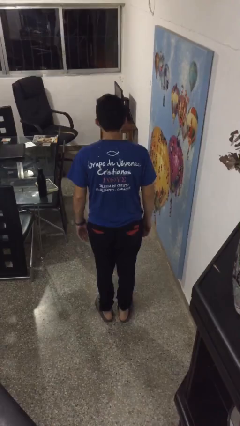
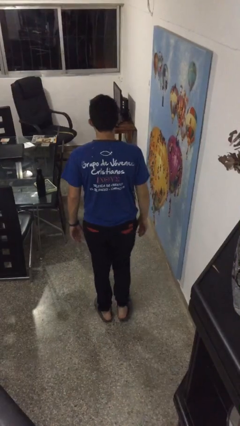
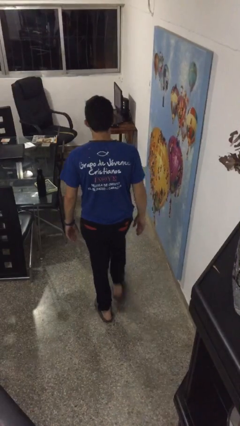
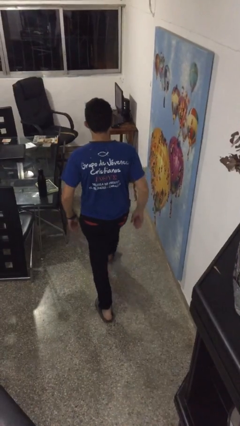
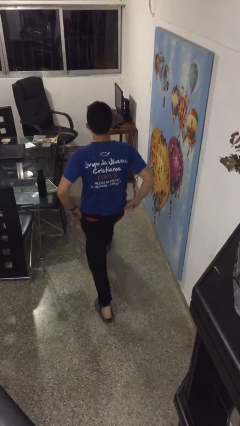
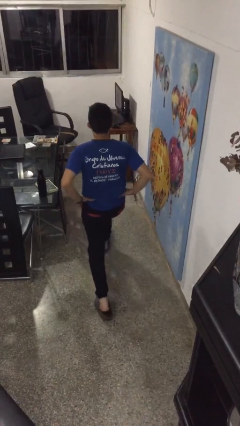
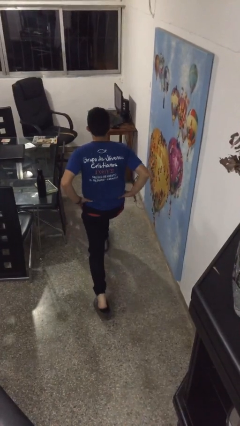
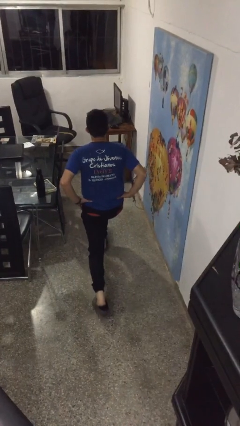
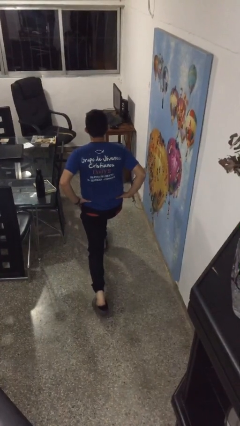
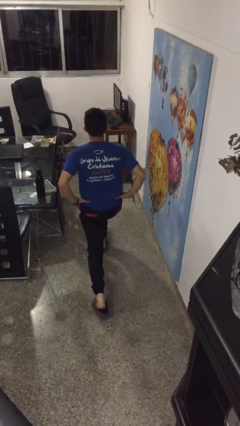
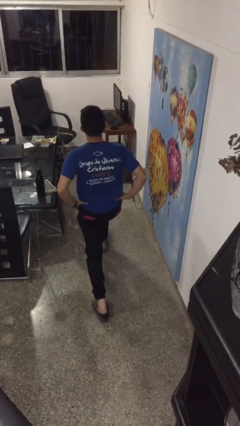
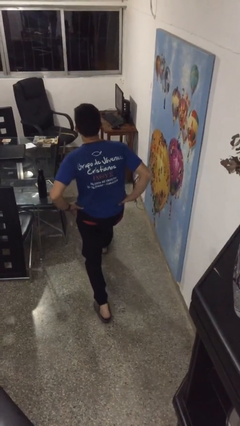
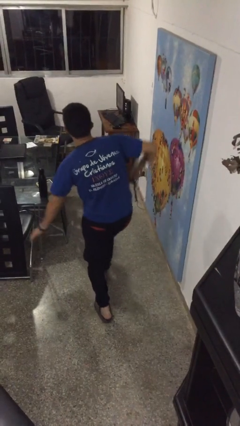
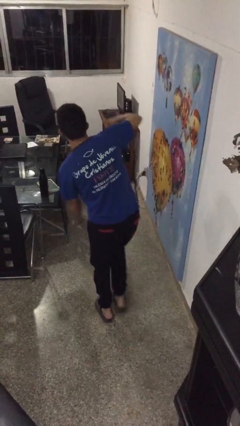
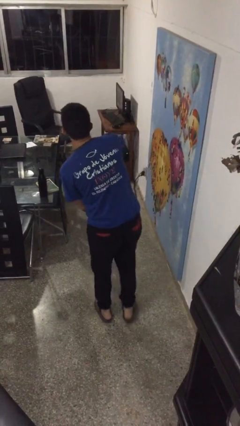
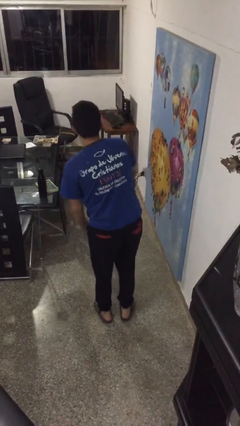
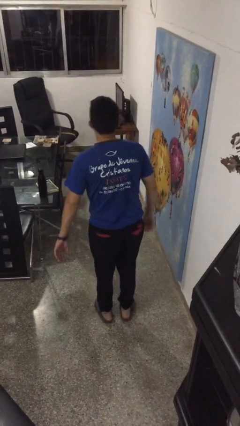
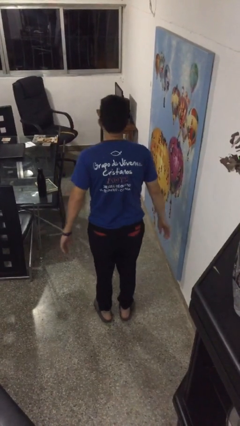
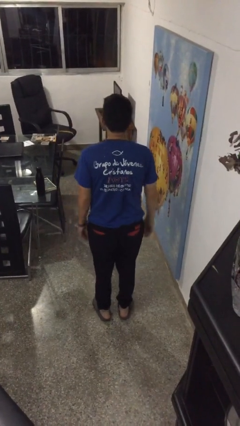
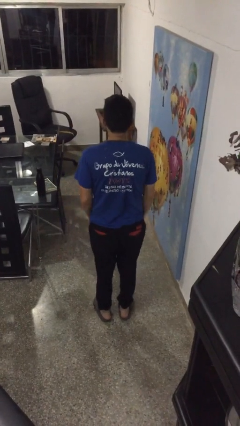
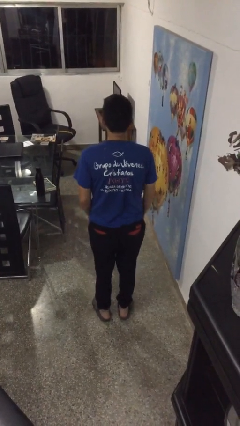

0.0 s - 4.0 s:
person exercises with lunges

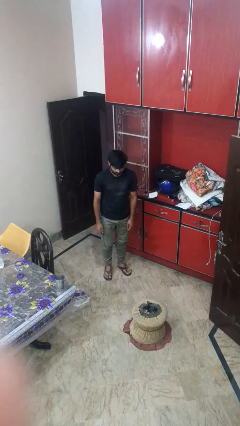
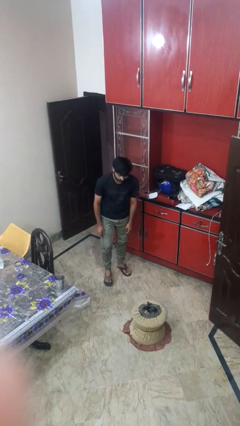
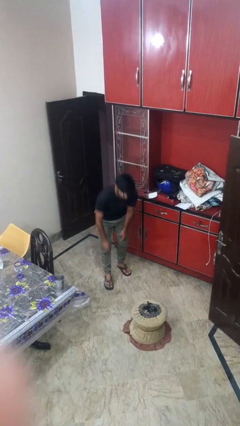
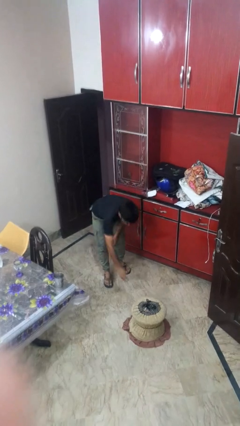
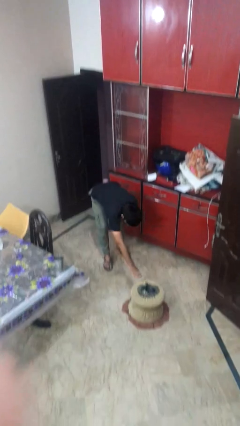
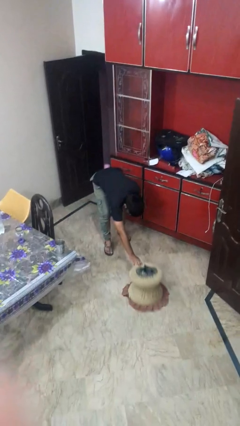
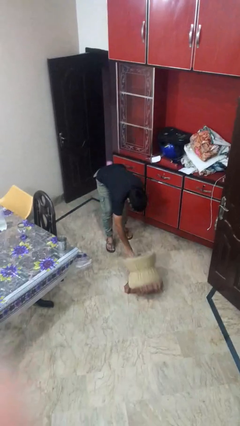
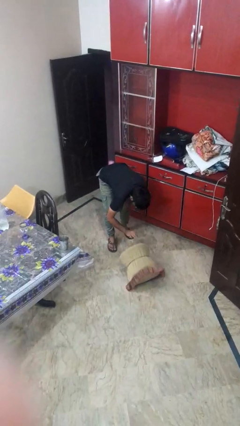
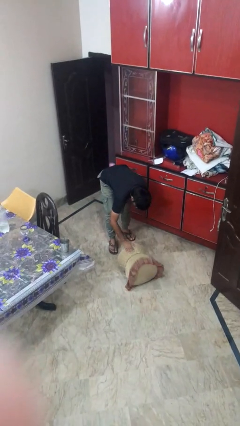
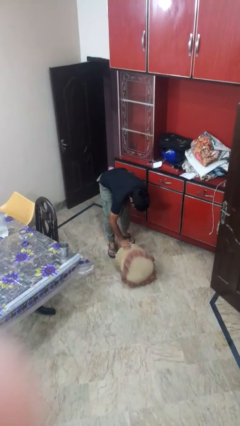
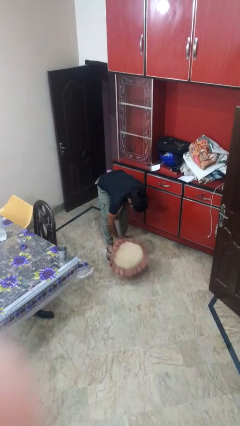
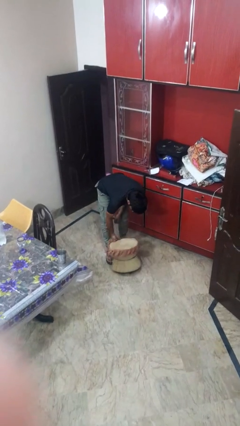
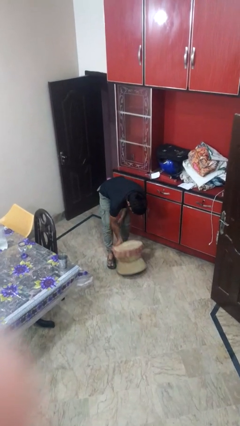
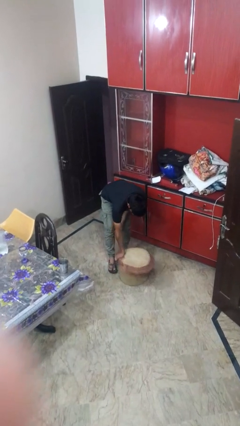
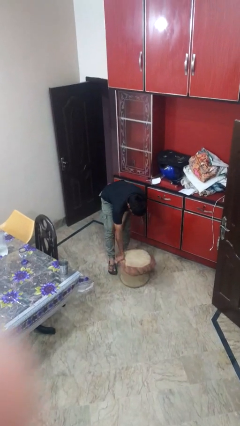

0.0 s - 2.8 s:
person sets upright furniture

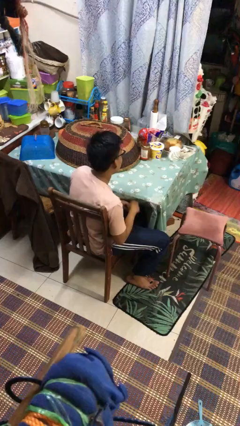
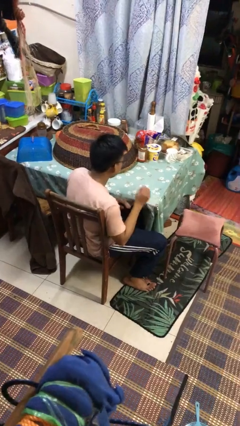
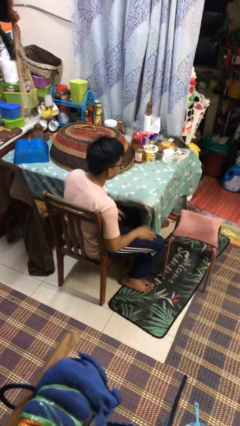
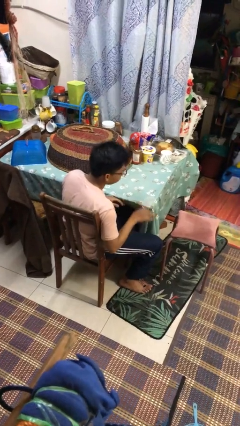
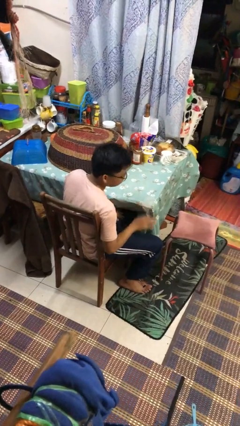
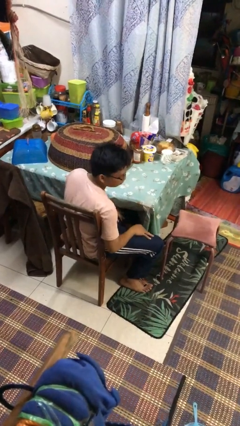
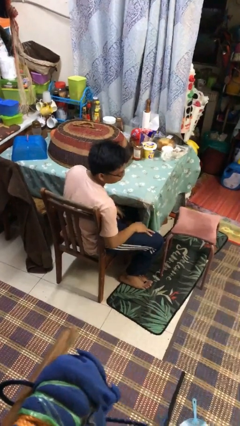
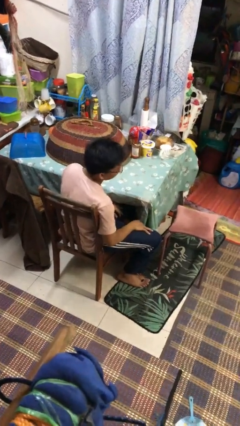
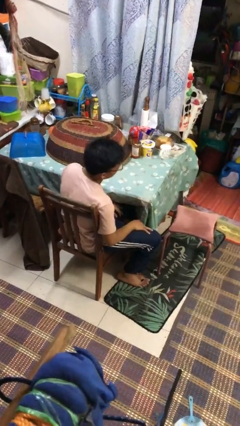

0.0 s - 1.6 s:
person slaps hands on thighs

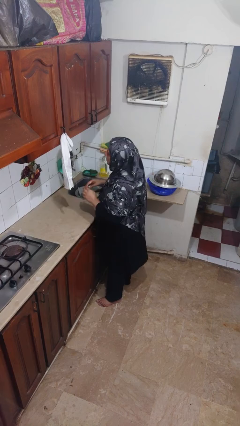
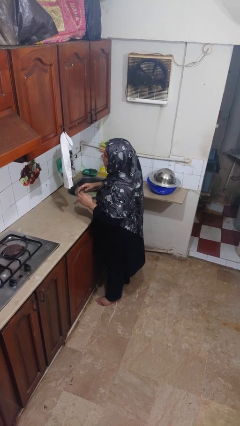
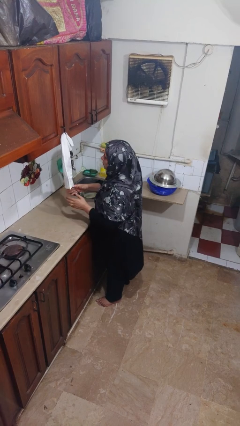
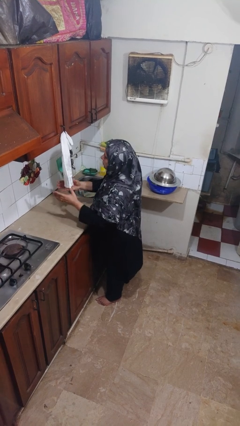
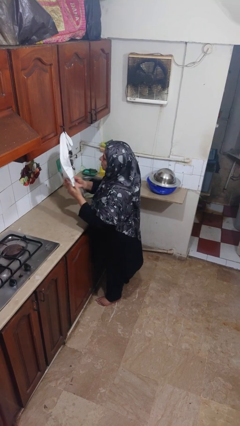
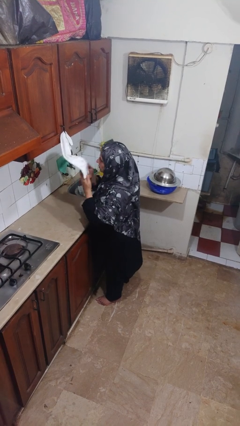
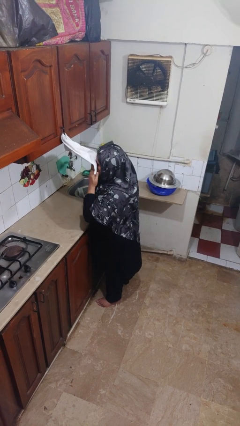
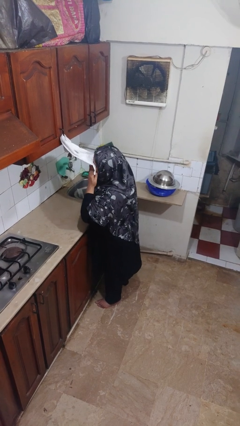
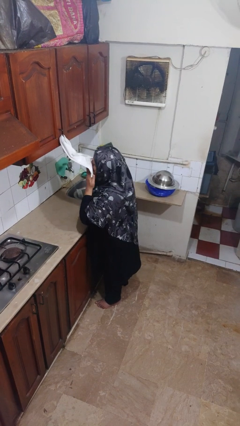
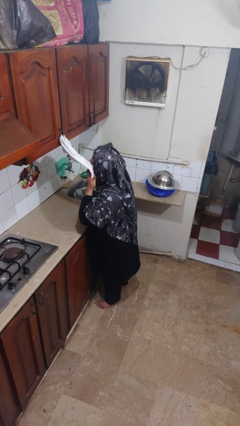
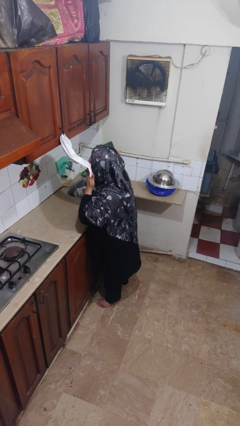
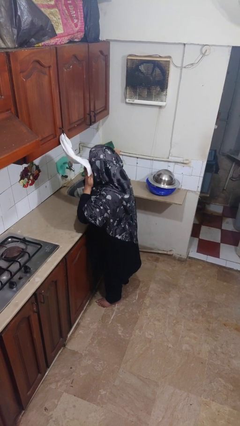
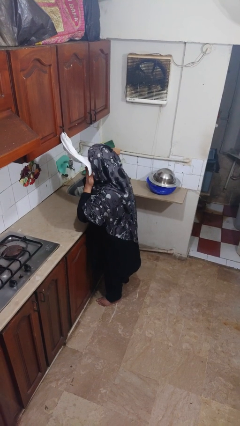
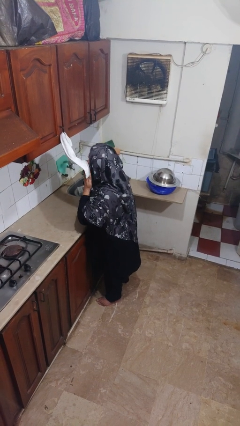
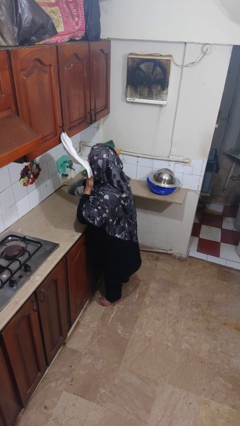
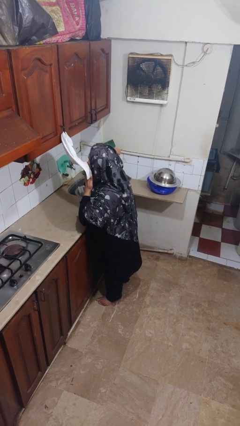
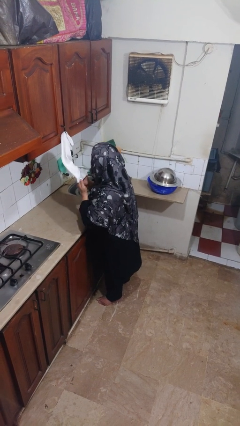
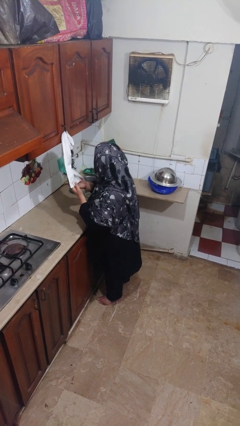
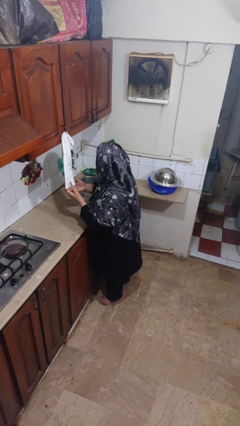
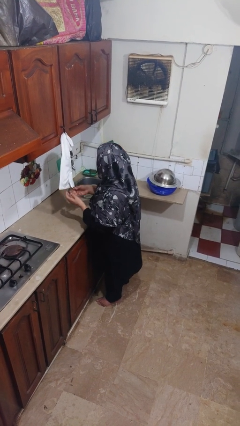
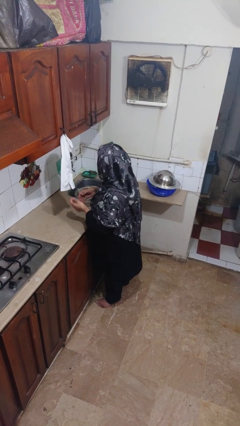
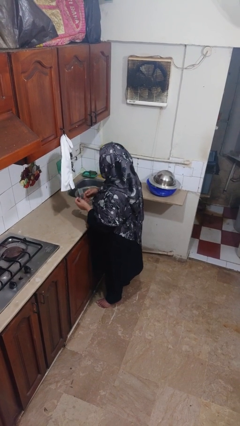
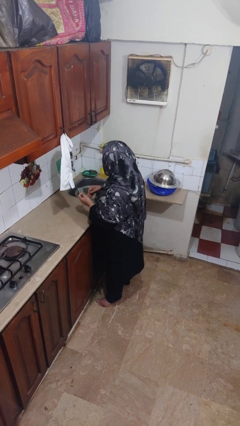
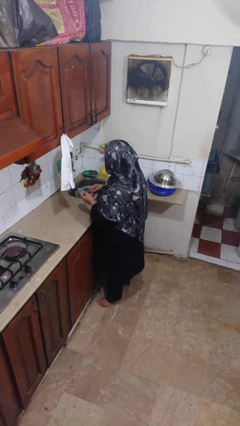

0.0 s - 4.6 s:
person dries face with towel

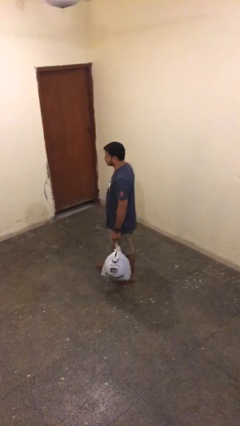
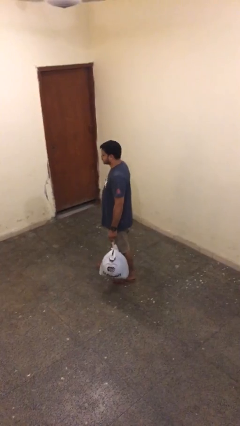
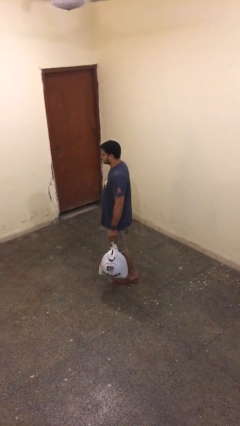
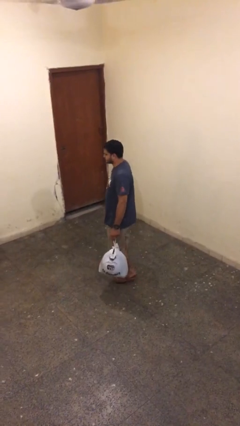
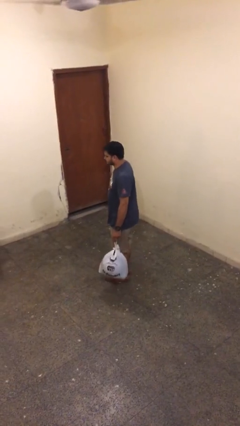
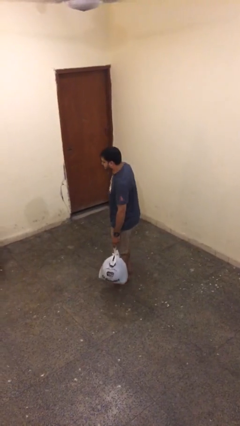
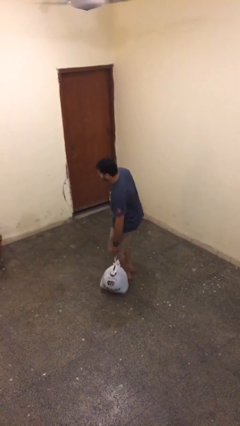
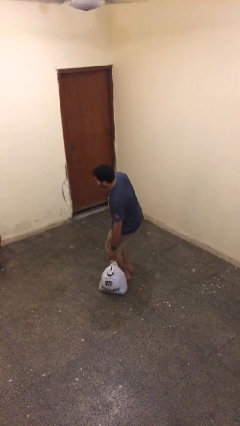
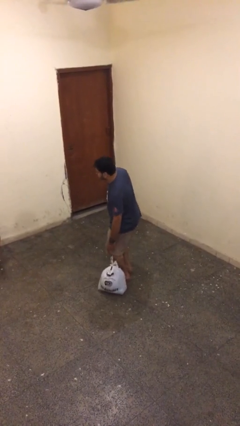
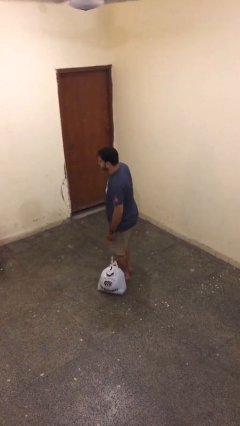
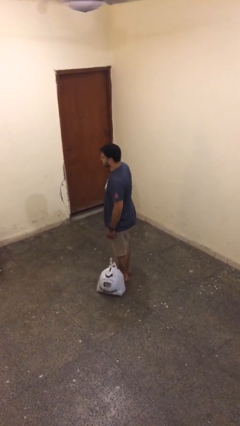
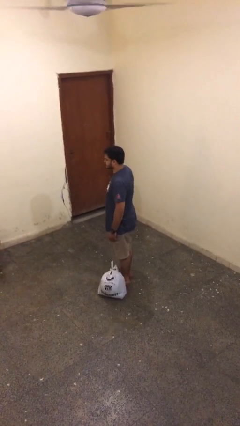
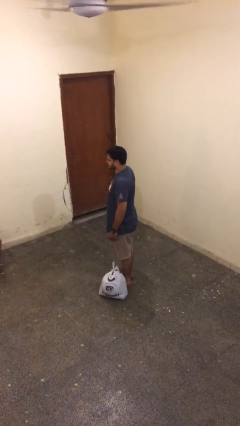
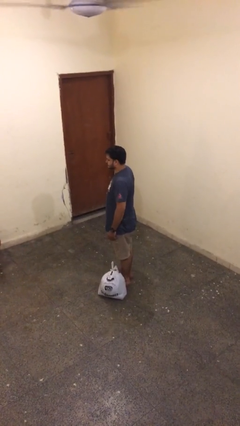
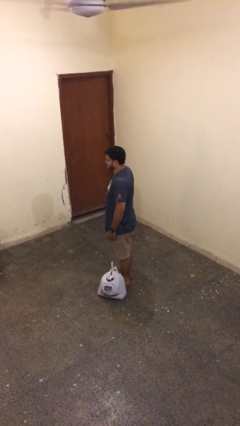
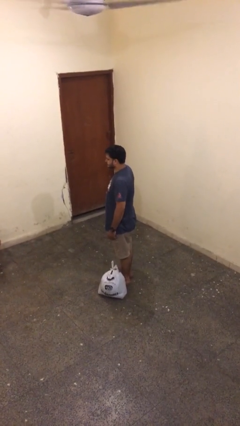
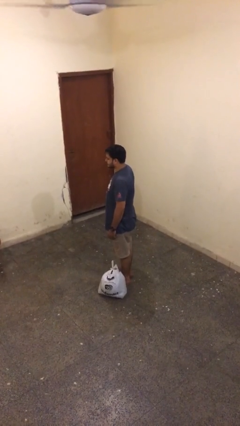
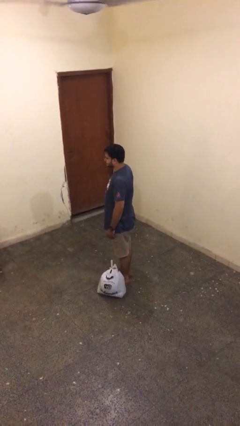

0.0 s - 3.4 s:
person puts down object on floor

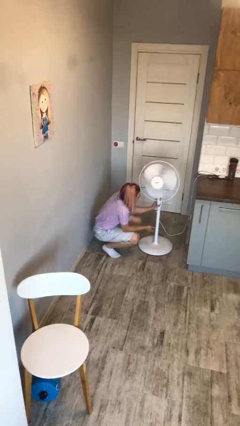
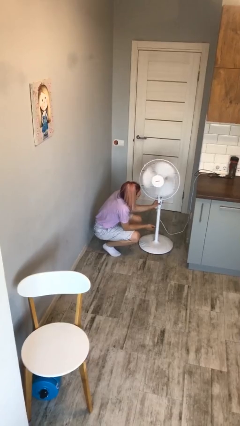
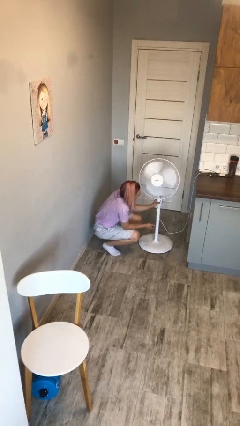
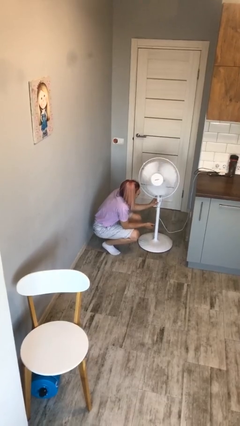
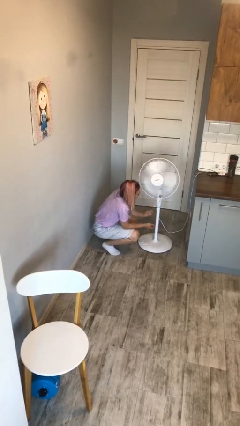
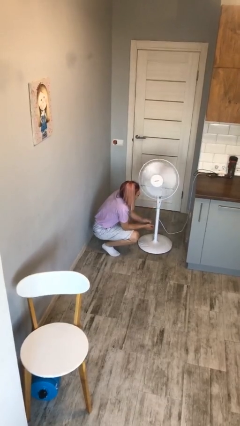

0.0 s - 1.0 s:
person turns on fan
